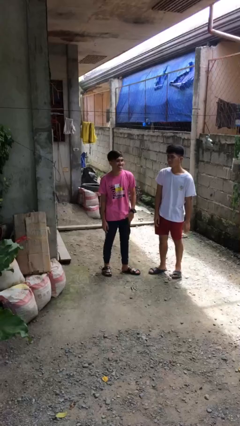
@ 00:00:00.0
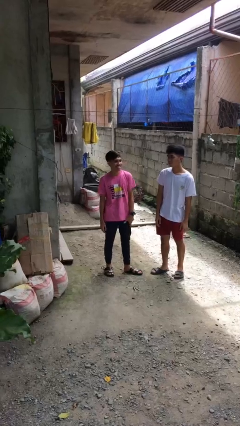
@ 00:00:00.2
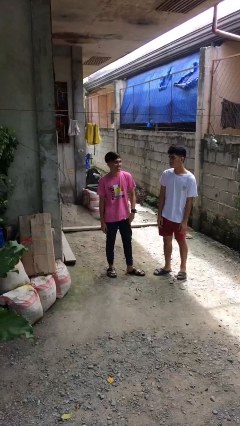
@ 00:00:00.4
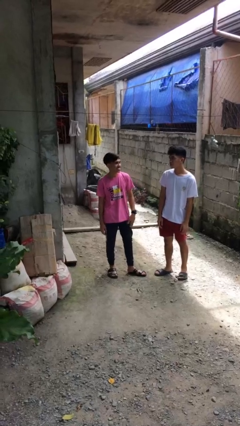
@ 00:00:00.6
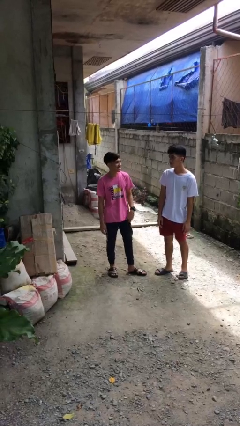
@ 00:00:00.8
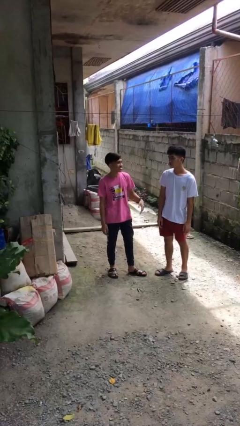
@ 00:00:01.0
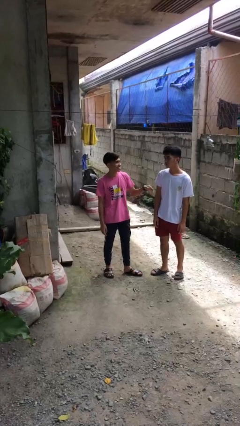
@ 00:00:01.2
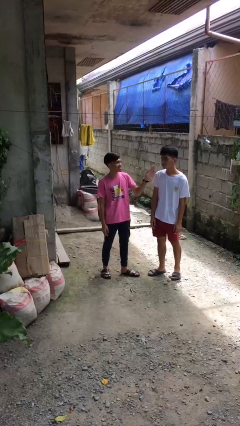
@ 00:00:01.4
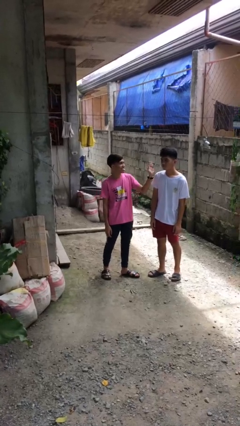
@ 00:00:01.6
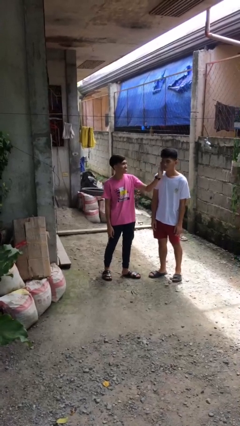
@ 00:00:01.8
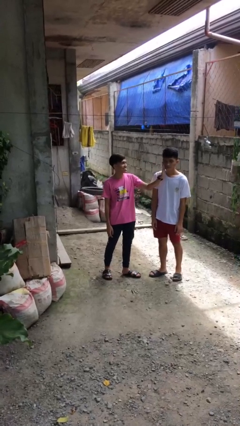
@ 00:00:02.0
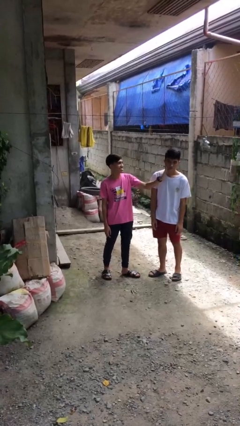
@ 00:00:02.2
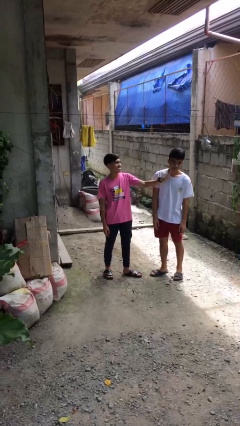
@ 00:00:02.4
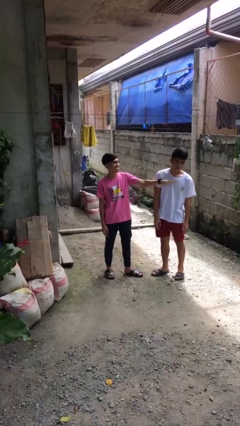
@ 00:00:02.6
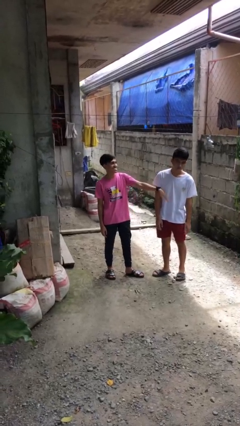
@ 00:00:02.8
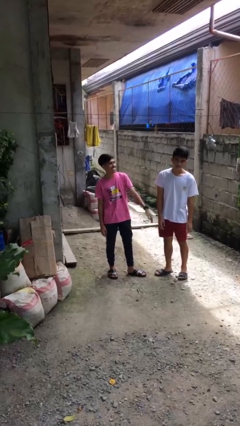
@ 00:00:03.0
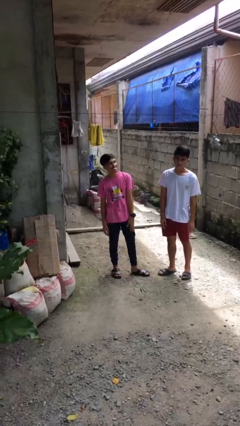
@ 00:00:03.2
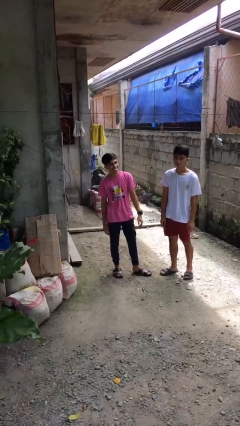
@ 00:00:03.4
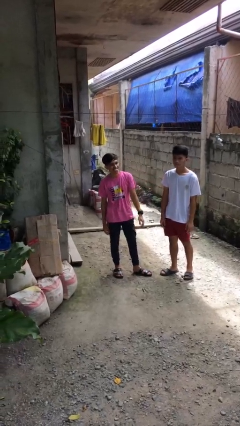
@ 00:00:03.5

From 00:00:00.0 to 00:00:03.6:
person touches face of person

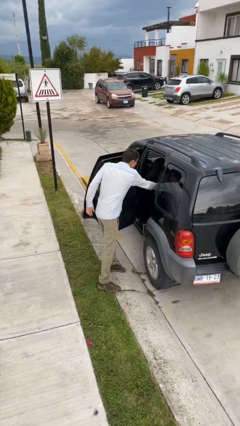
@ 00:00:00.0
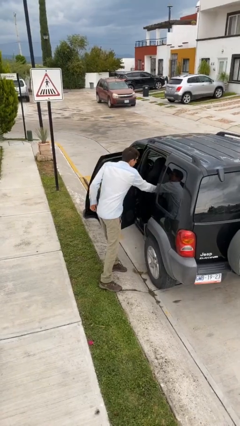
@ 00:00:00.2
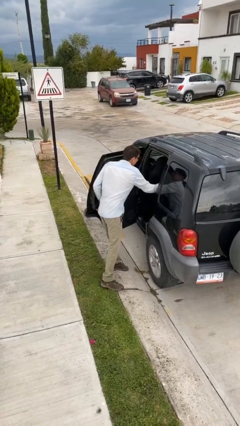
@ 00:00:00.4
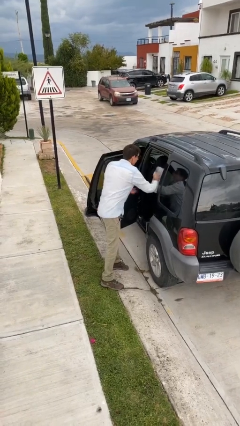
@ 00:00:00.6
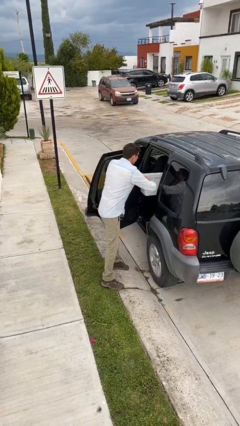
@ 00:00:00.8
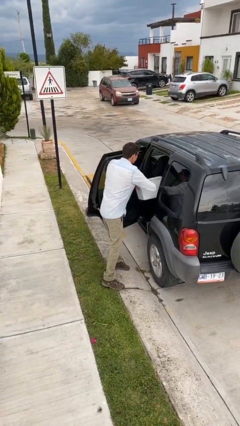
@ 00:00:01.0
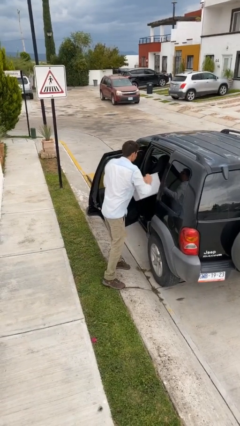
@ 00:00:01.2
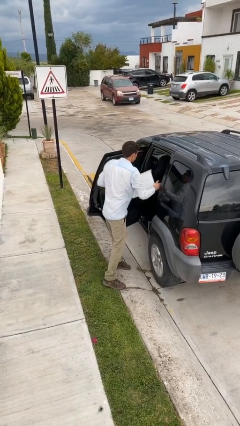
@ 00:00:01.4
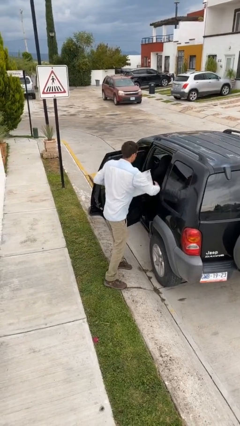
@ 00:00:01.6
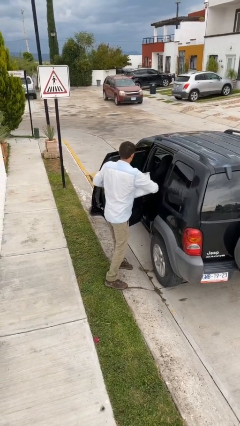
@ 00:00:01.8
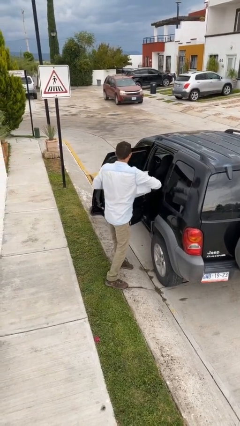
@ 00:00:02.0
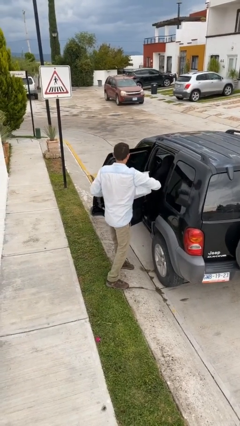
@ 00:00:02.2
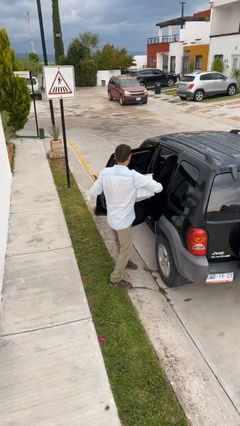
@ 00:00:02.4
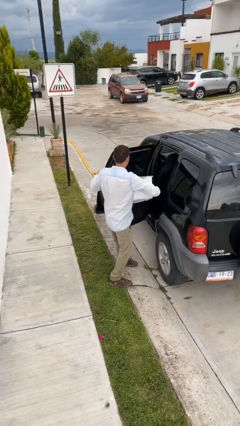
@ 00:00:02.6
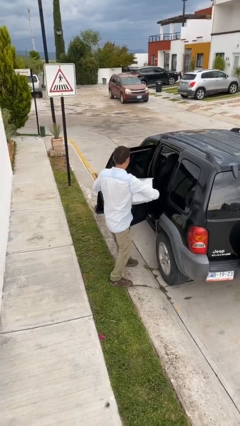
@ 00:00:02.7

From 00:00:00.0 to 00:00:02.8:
person unloads car

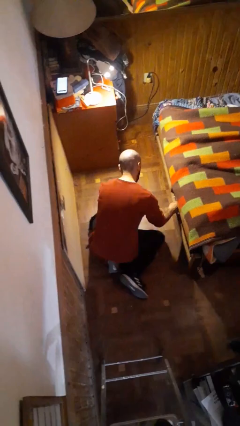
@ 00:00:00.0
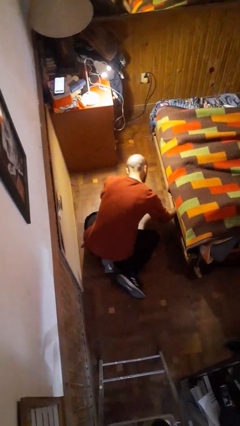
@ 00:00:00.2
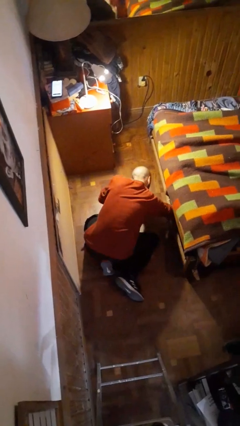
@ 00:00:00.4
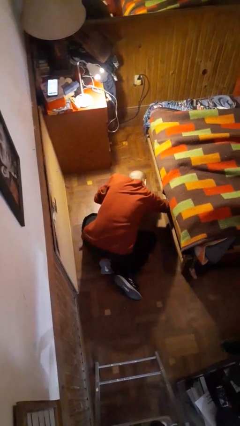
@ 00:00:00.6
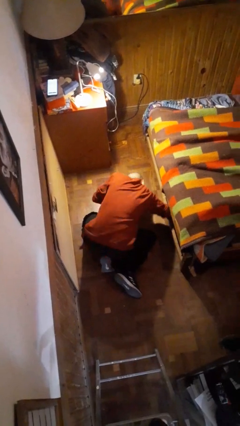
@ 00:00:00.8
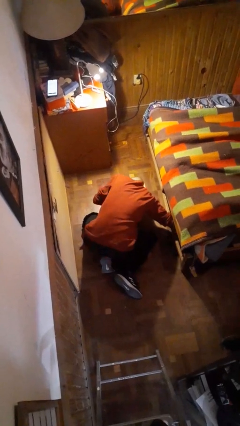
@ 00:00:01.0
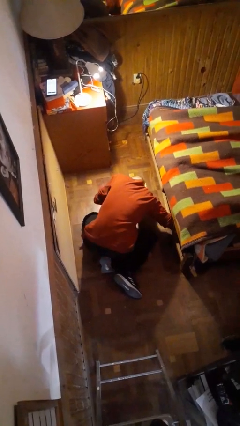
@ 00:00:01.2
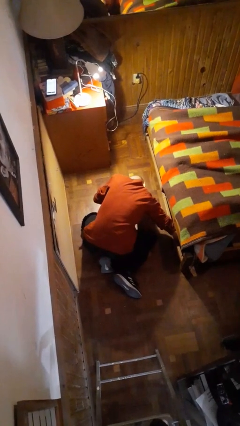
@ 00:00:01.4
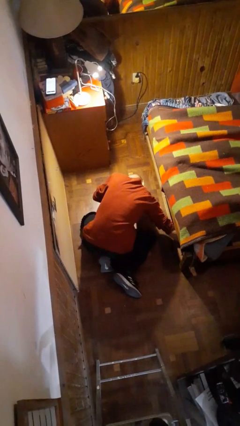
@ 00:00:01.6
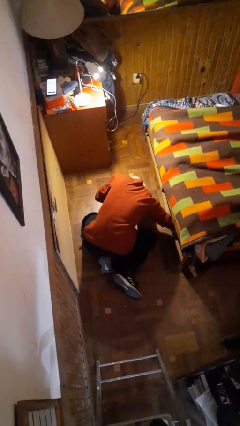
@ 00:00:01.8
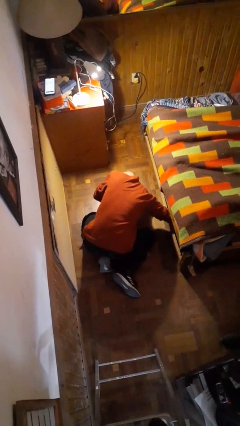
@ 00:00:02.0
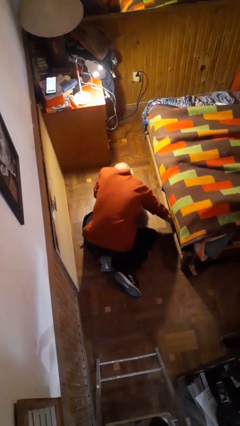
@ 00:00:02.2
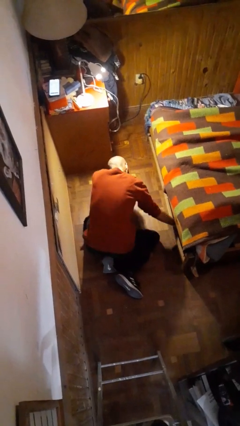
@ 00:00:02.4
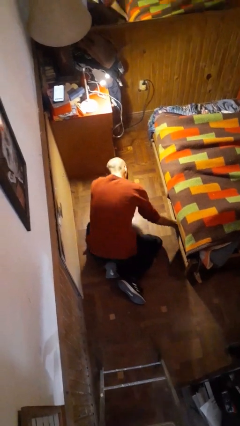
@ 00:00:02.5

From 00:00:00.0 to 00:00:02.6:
person searches under bed

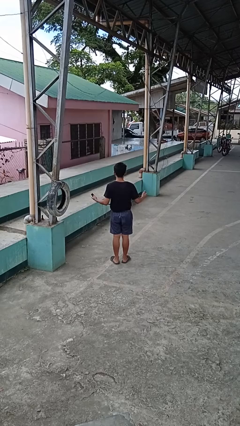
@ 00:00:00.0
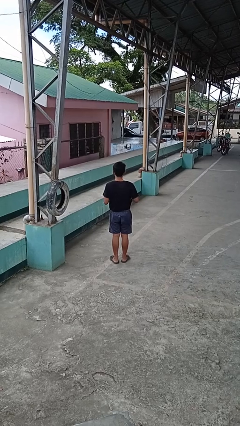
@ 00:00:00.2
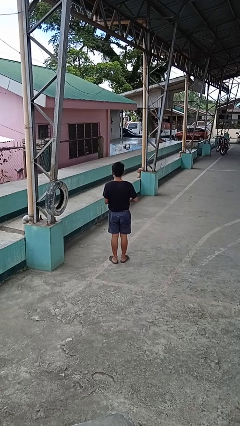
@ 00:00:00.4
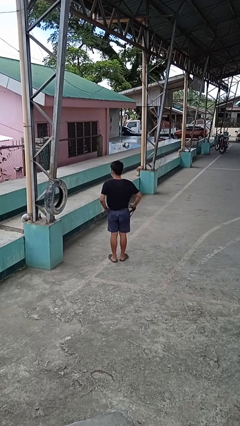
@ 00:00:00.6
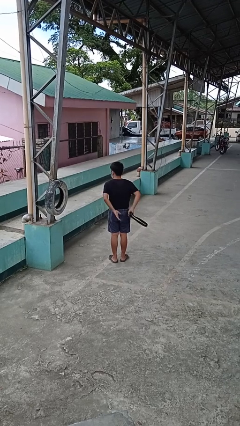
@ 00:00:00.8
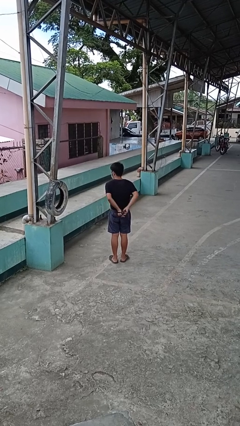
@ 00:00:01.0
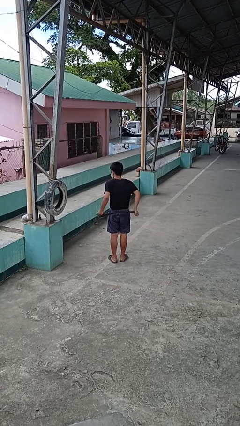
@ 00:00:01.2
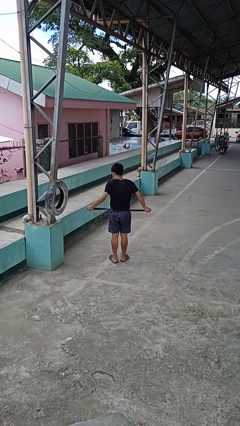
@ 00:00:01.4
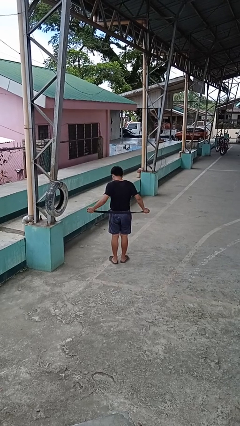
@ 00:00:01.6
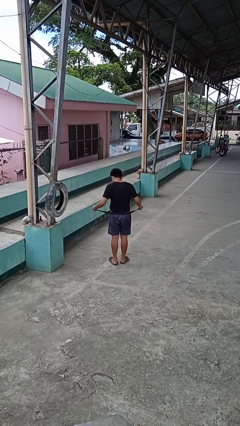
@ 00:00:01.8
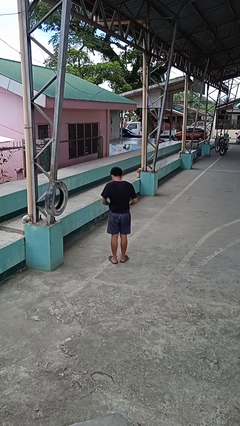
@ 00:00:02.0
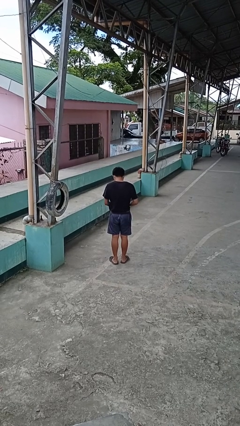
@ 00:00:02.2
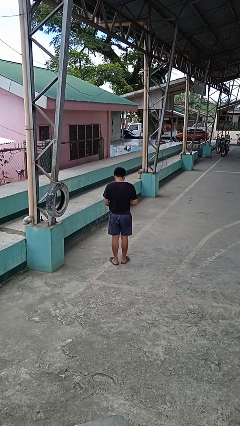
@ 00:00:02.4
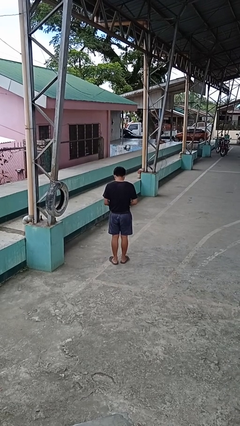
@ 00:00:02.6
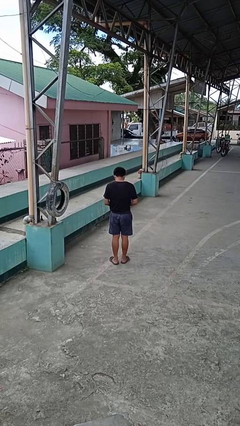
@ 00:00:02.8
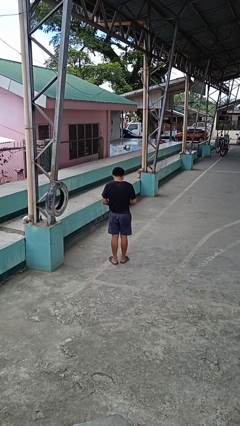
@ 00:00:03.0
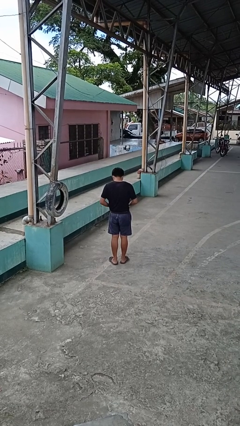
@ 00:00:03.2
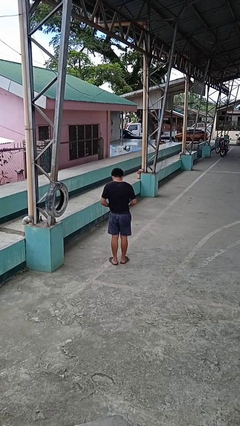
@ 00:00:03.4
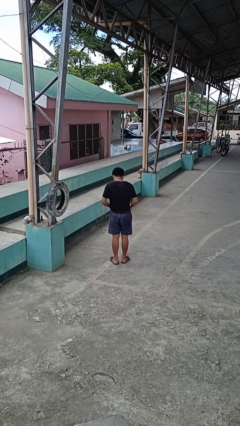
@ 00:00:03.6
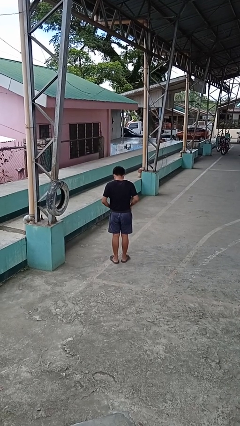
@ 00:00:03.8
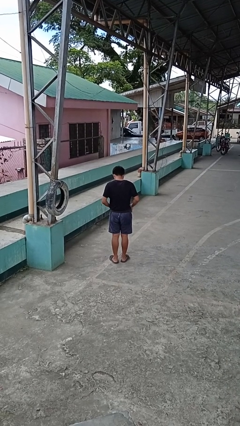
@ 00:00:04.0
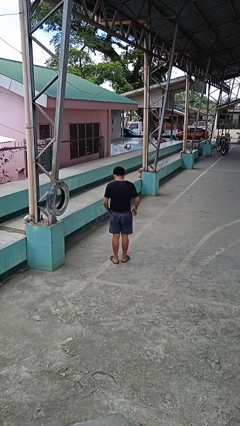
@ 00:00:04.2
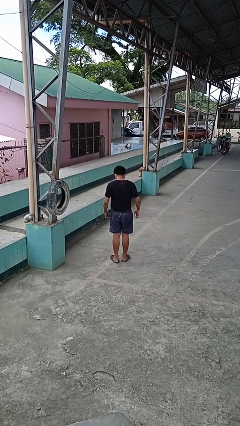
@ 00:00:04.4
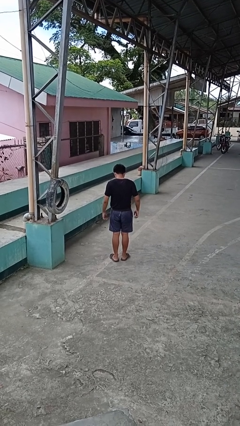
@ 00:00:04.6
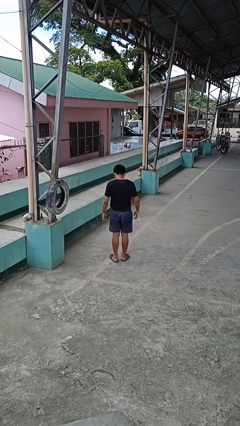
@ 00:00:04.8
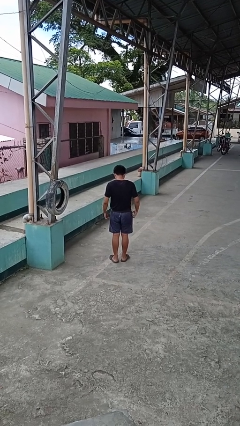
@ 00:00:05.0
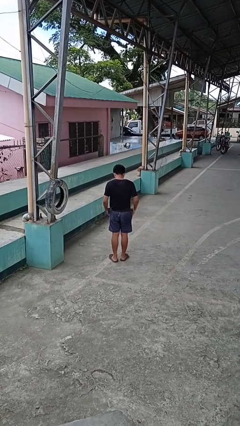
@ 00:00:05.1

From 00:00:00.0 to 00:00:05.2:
person puts on belt

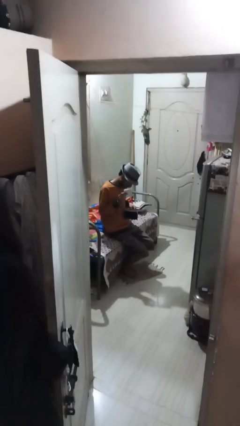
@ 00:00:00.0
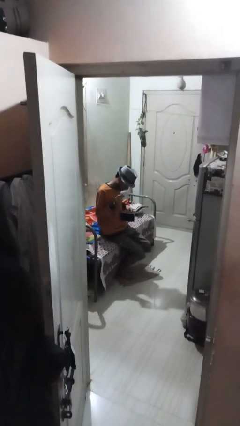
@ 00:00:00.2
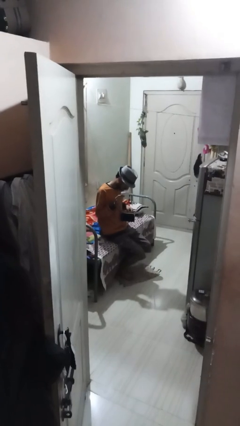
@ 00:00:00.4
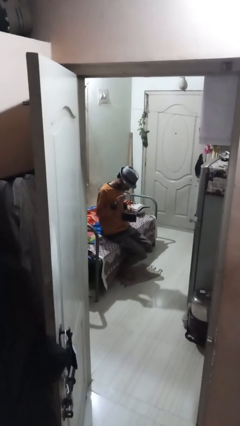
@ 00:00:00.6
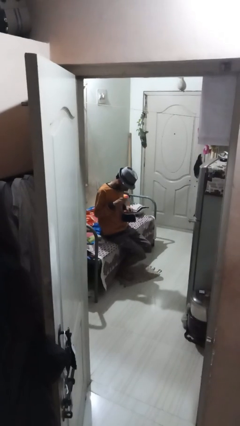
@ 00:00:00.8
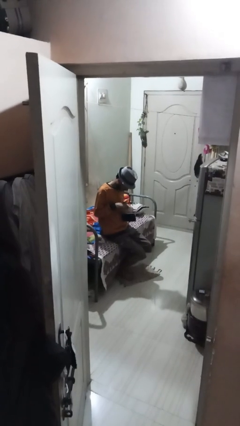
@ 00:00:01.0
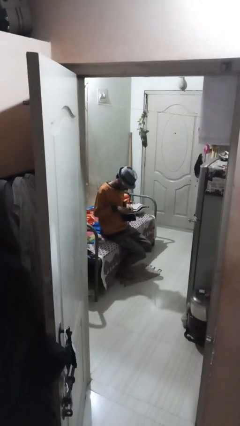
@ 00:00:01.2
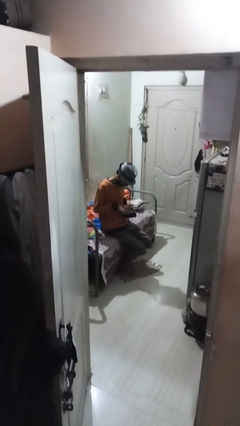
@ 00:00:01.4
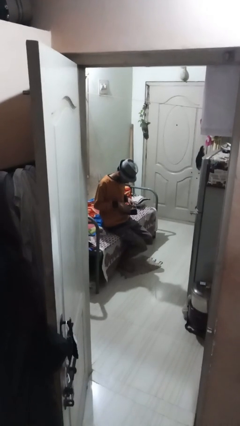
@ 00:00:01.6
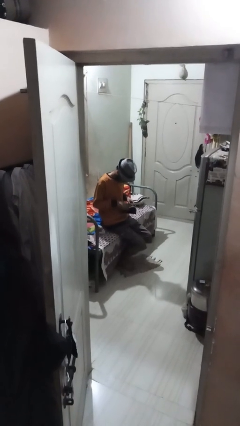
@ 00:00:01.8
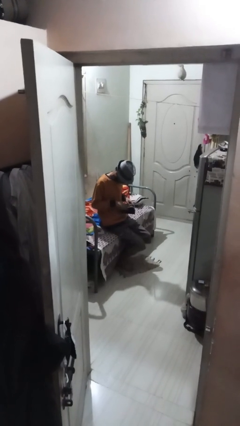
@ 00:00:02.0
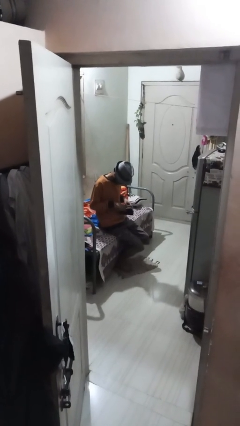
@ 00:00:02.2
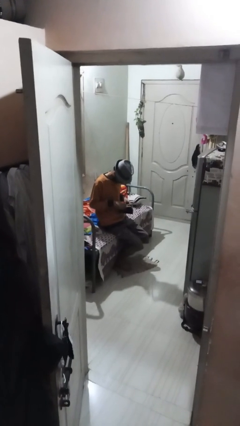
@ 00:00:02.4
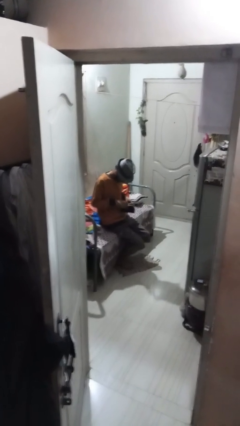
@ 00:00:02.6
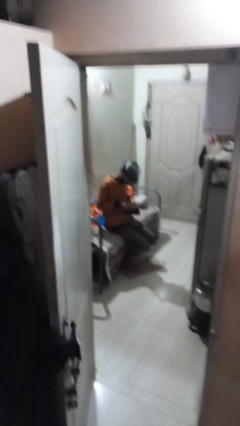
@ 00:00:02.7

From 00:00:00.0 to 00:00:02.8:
person puts object into purse
